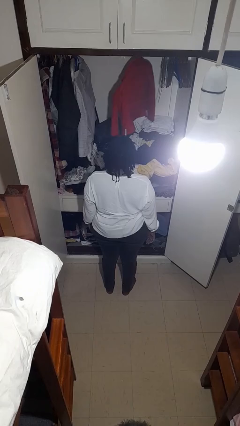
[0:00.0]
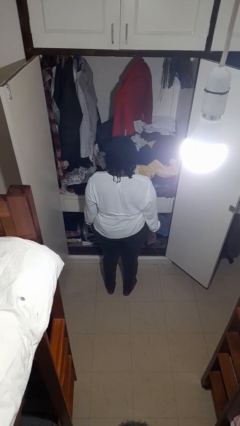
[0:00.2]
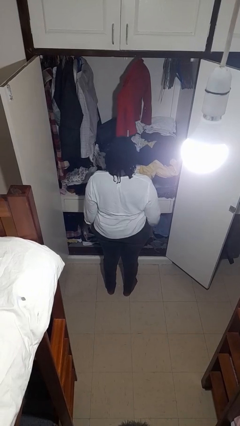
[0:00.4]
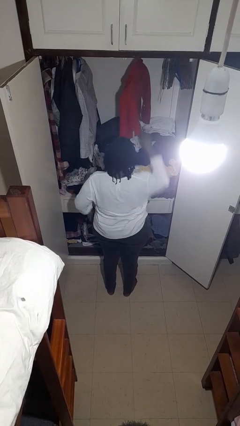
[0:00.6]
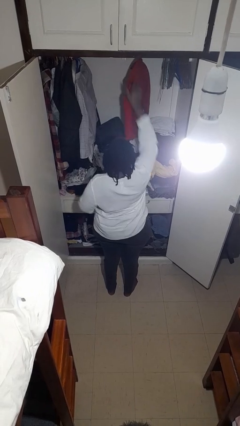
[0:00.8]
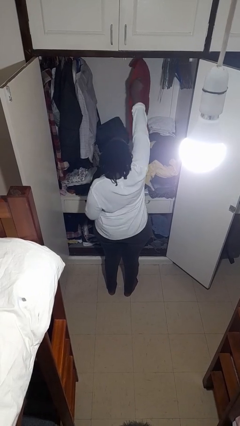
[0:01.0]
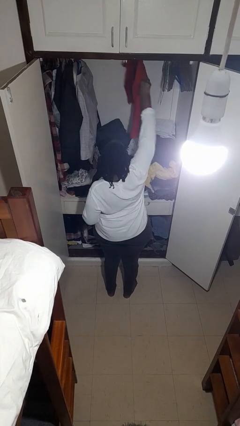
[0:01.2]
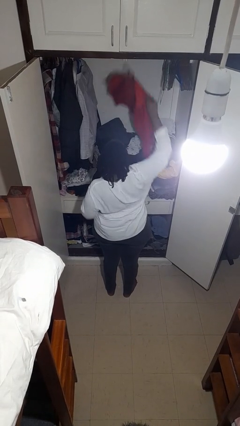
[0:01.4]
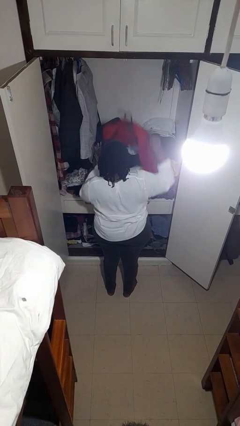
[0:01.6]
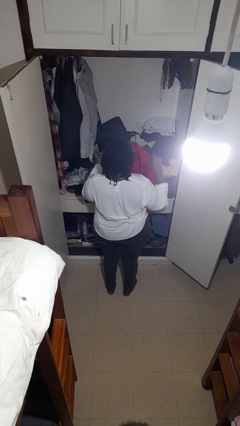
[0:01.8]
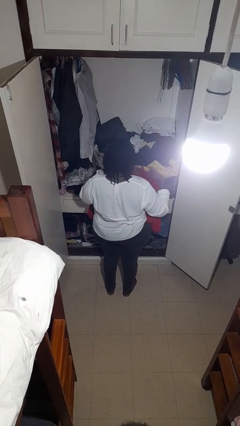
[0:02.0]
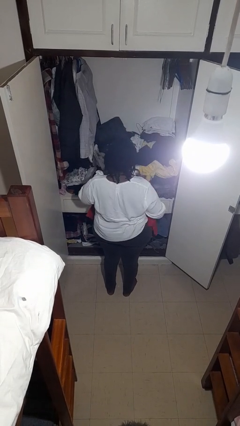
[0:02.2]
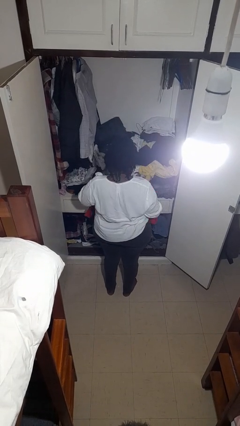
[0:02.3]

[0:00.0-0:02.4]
person takes clothes from closet

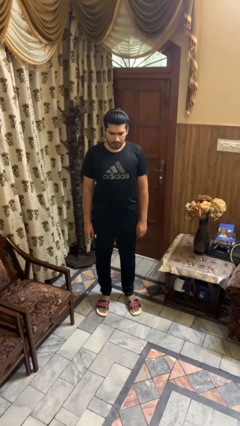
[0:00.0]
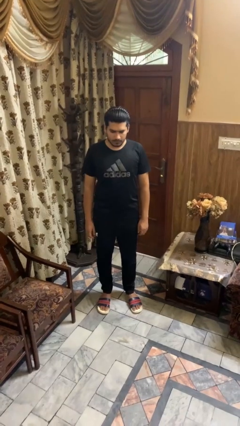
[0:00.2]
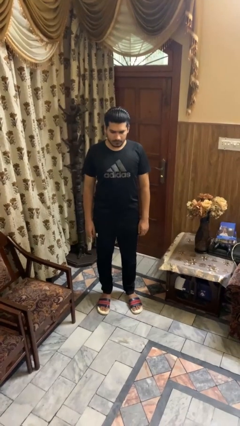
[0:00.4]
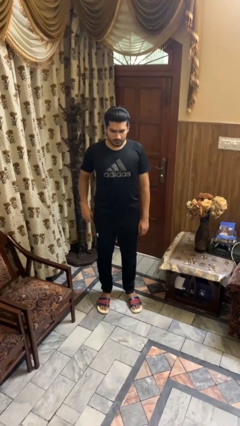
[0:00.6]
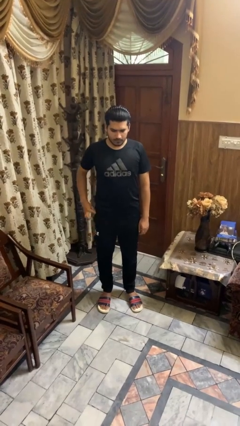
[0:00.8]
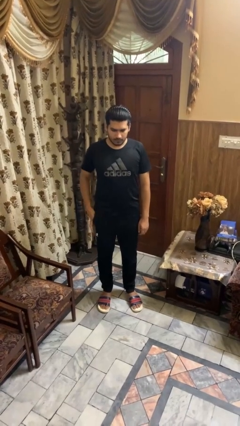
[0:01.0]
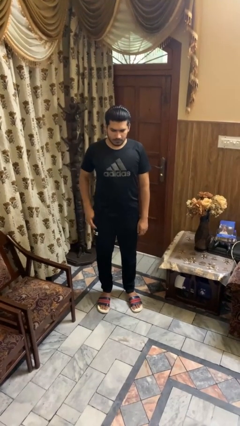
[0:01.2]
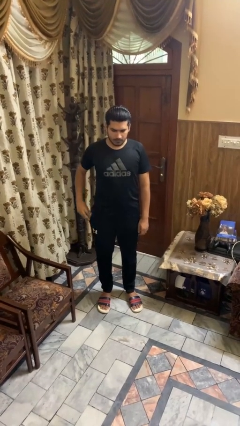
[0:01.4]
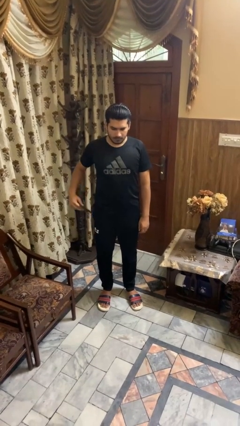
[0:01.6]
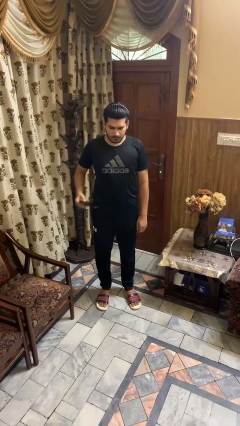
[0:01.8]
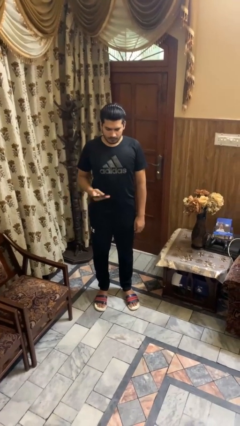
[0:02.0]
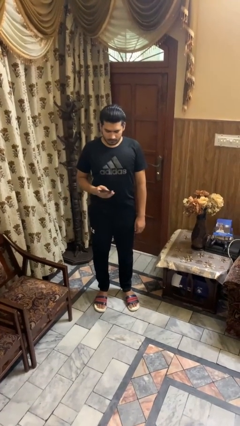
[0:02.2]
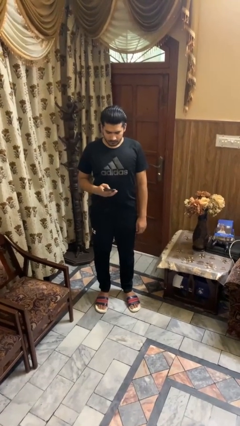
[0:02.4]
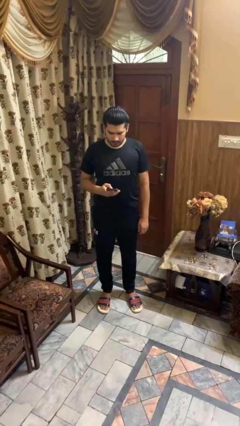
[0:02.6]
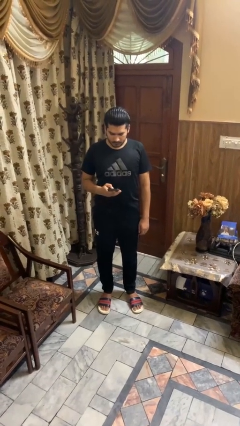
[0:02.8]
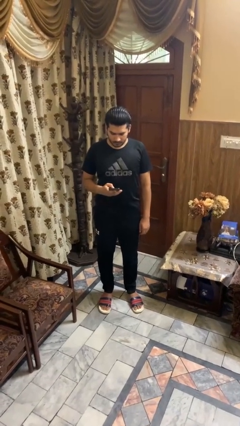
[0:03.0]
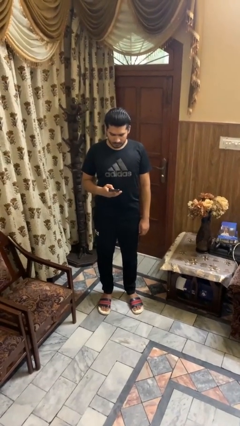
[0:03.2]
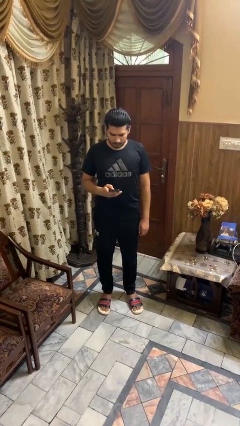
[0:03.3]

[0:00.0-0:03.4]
person takes phone from pocket

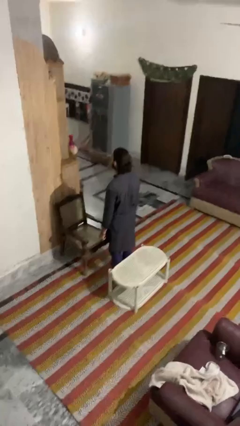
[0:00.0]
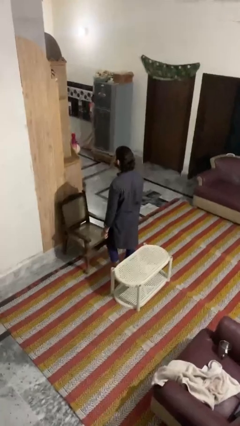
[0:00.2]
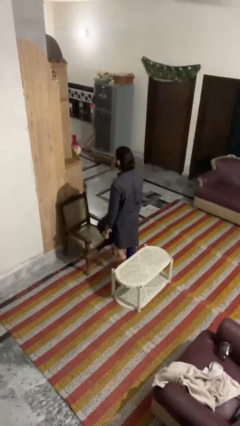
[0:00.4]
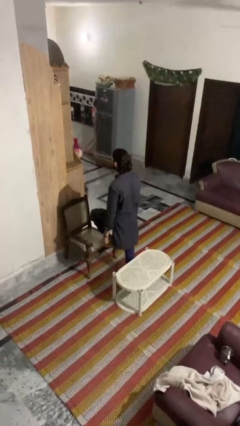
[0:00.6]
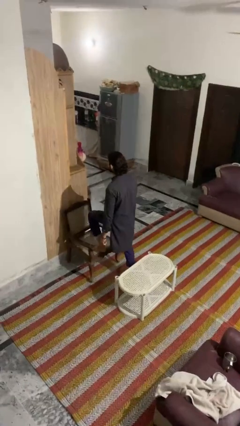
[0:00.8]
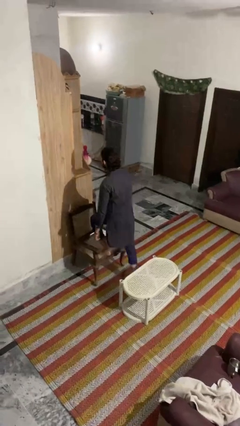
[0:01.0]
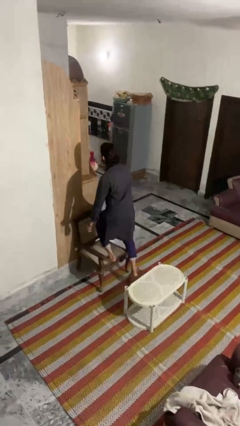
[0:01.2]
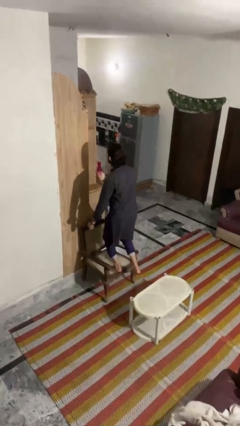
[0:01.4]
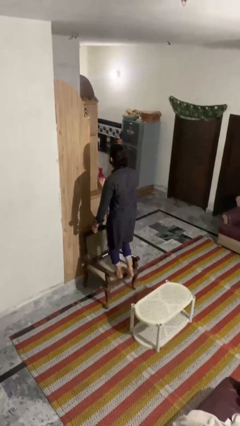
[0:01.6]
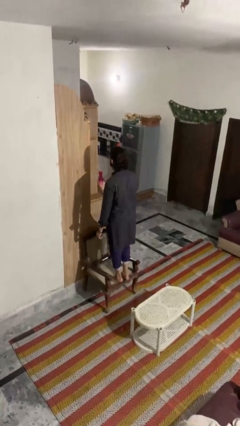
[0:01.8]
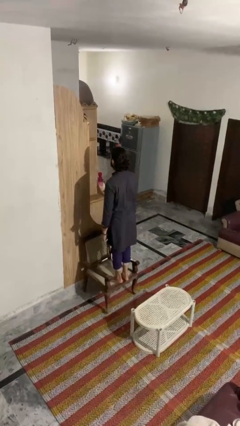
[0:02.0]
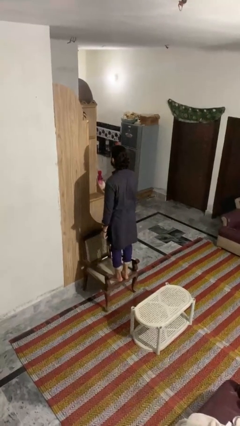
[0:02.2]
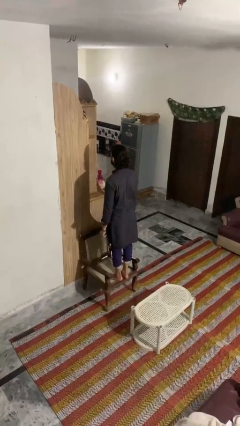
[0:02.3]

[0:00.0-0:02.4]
person climbs on chair

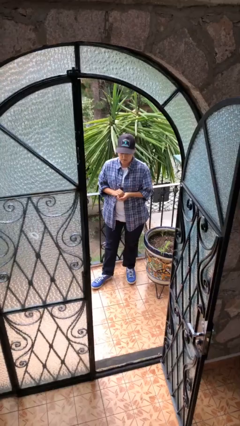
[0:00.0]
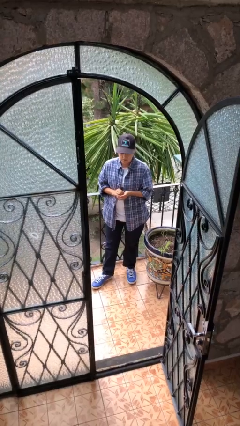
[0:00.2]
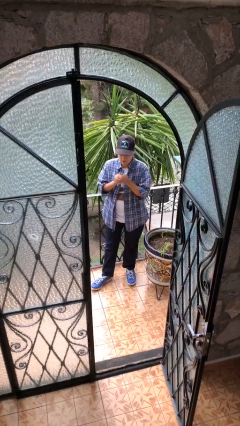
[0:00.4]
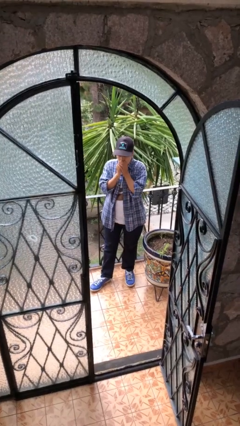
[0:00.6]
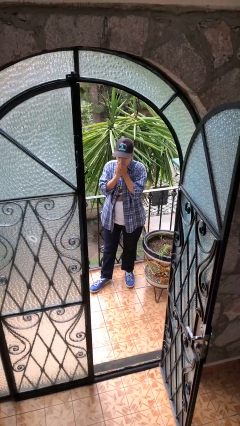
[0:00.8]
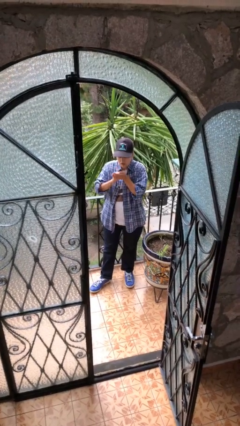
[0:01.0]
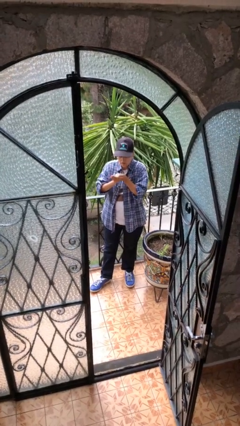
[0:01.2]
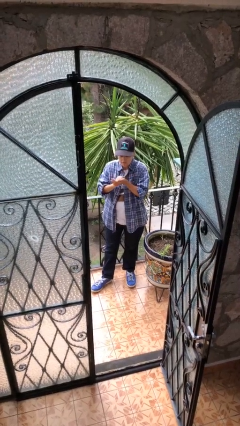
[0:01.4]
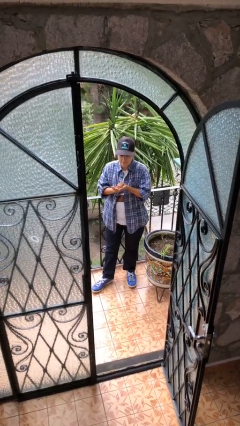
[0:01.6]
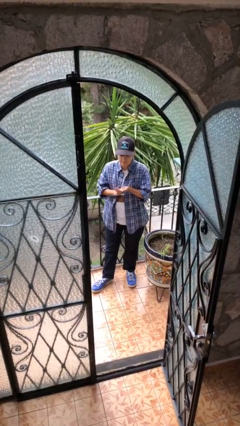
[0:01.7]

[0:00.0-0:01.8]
person blows into hands

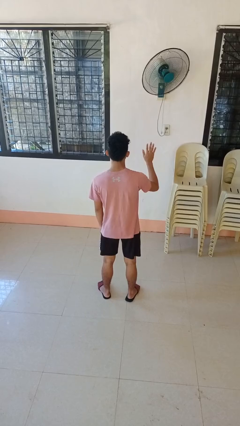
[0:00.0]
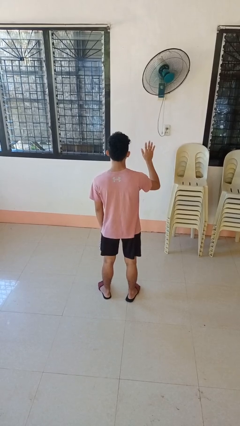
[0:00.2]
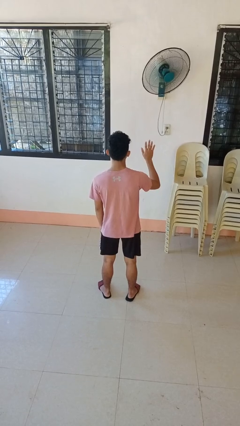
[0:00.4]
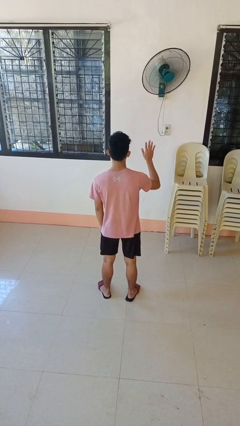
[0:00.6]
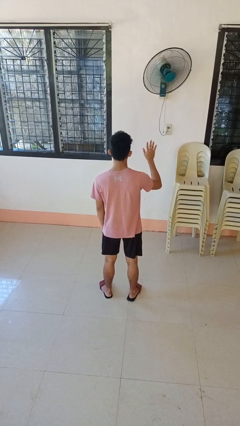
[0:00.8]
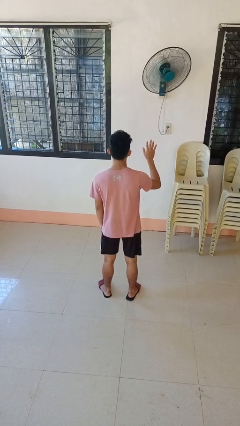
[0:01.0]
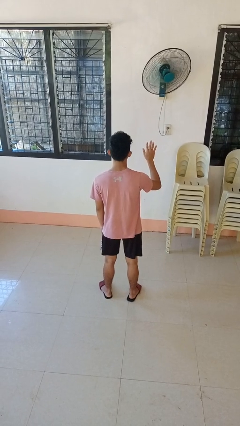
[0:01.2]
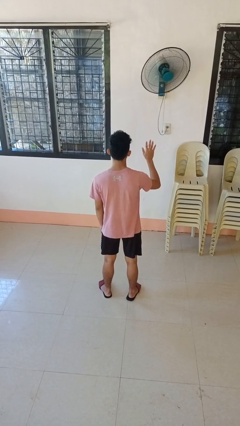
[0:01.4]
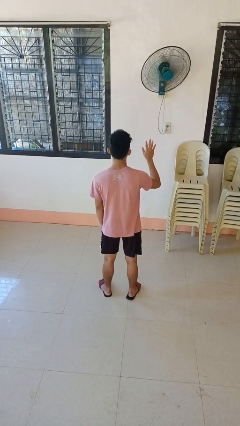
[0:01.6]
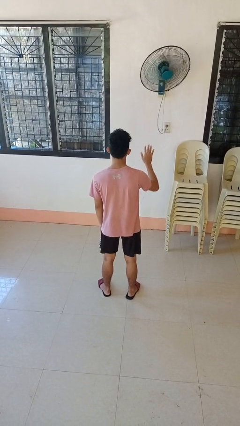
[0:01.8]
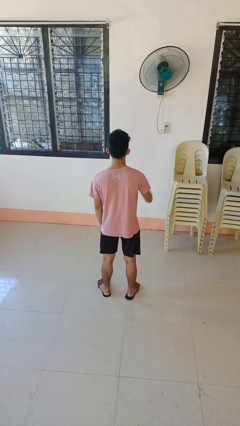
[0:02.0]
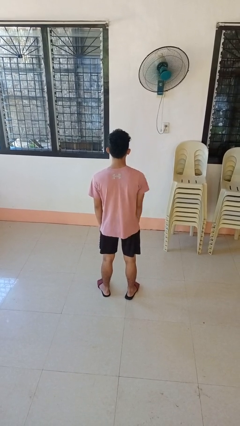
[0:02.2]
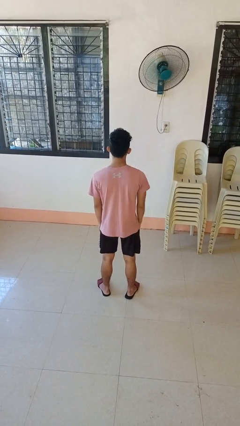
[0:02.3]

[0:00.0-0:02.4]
person gestures number five

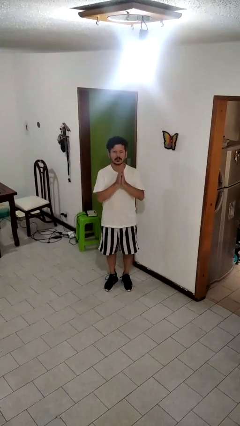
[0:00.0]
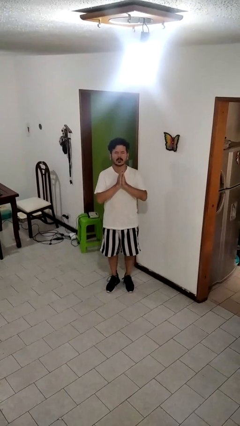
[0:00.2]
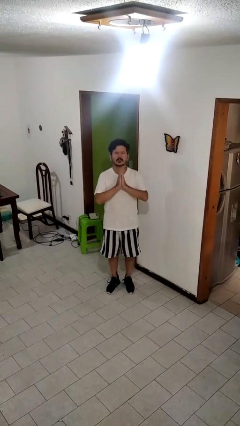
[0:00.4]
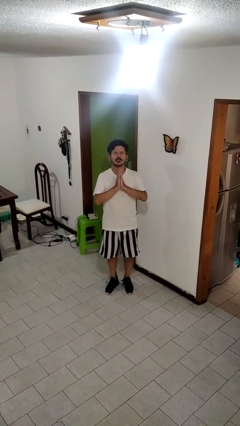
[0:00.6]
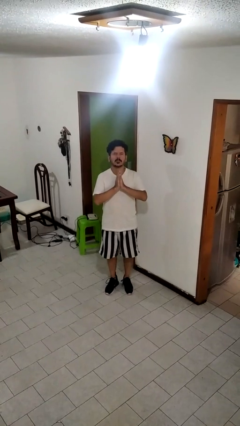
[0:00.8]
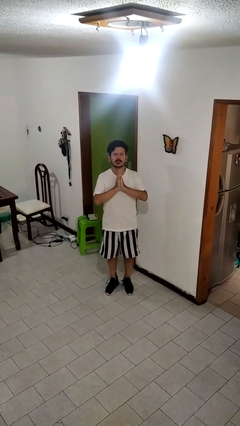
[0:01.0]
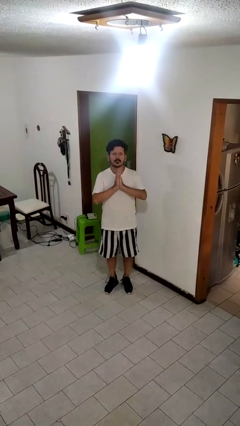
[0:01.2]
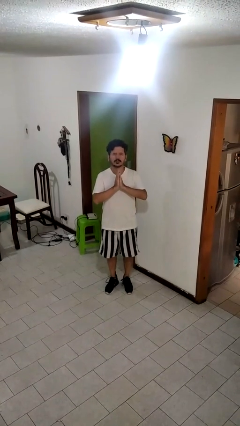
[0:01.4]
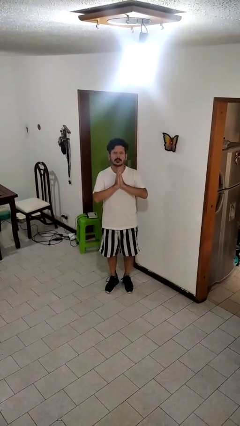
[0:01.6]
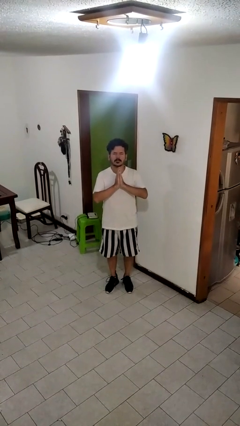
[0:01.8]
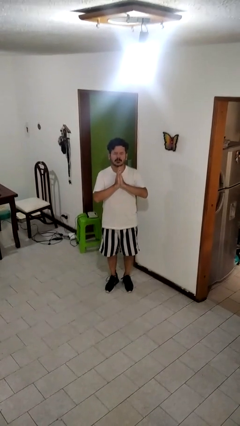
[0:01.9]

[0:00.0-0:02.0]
person prays

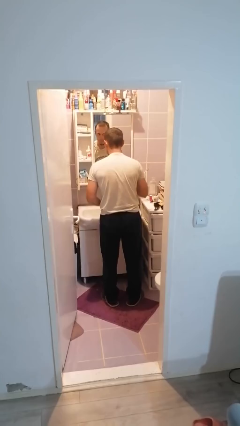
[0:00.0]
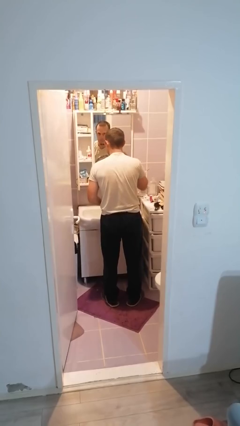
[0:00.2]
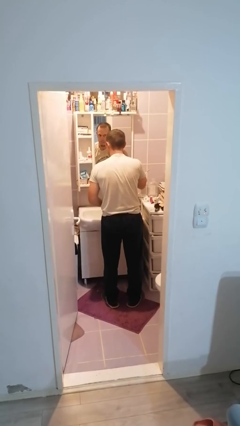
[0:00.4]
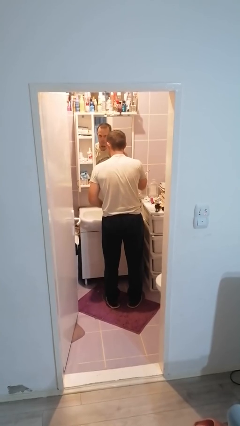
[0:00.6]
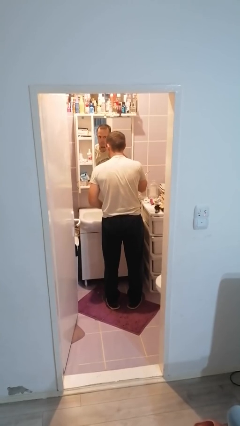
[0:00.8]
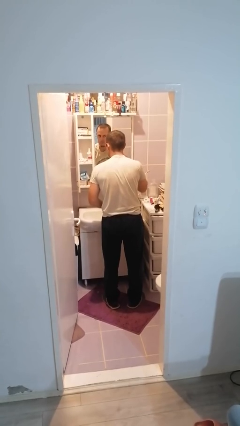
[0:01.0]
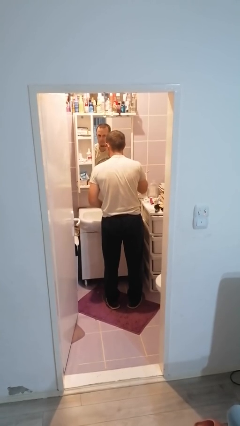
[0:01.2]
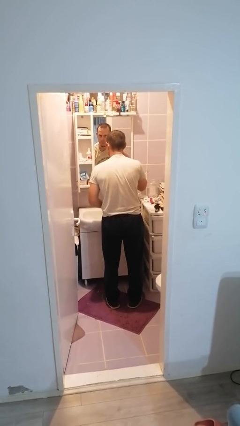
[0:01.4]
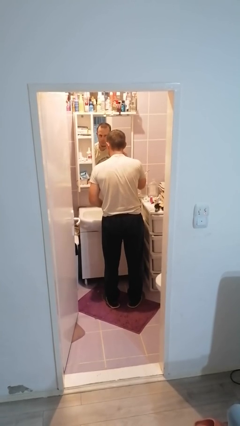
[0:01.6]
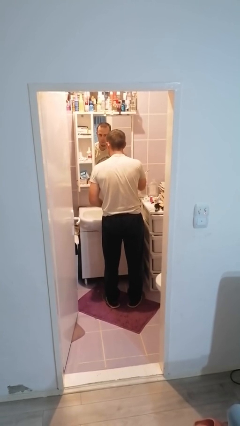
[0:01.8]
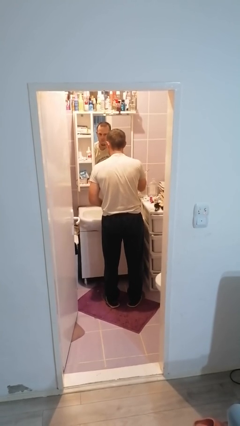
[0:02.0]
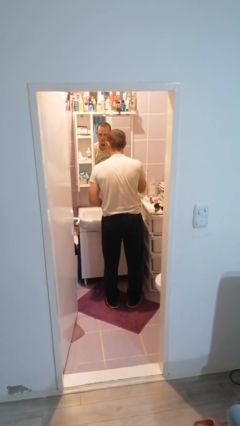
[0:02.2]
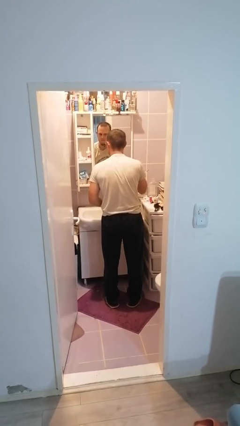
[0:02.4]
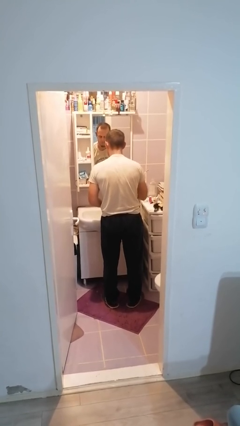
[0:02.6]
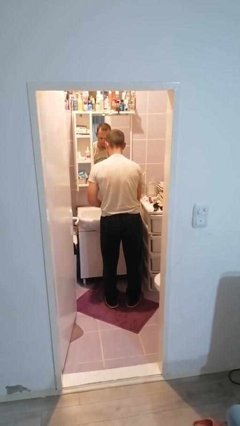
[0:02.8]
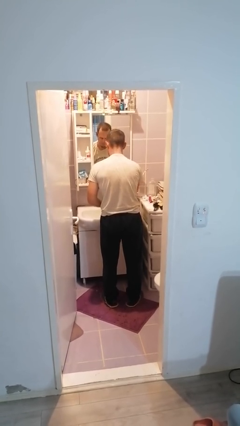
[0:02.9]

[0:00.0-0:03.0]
person shaves face
